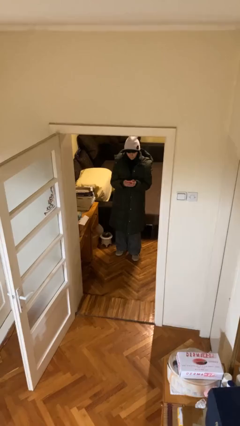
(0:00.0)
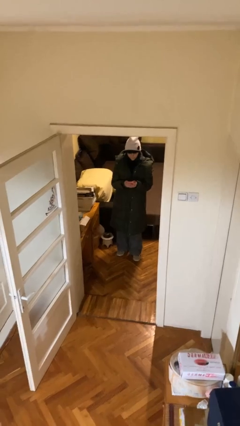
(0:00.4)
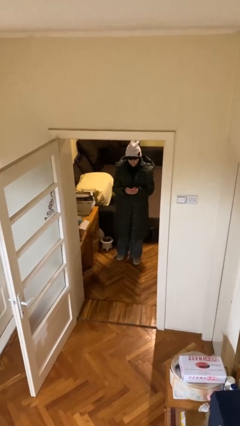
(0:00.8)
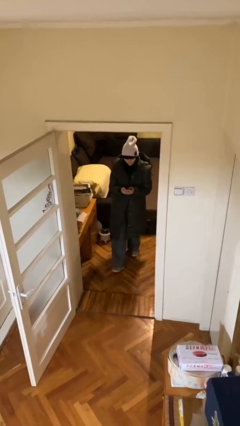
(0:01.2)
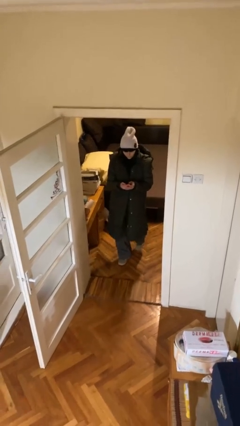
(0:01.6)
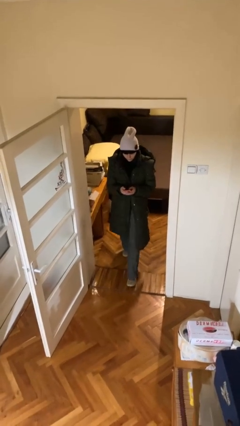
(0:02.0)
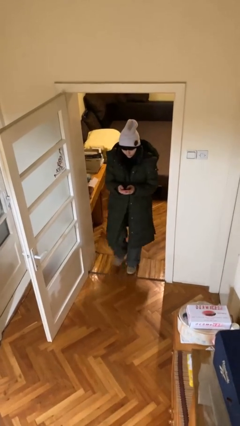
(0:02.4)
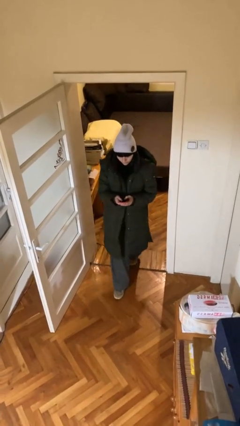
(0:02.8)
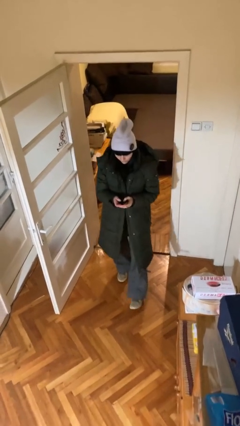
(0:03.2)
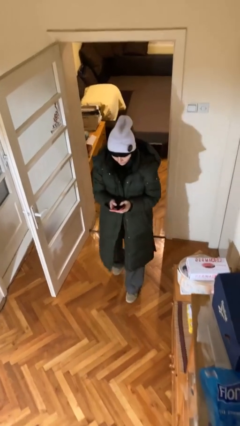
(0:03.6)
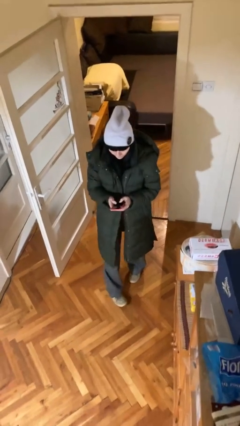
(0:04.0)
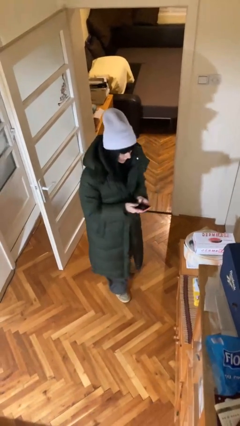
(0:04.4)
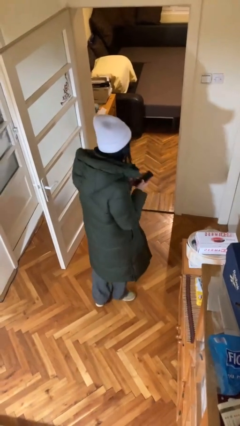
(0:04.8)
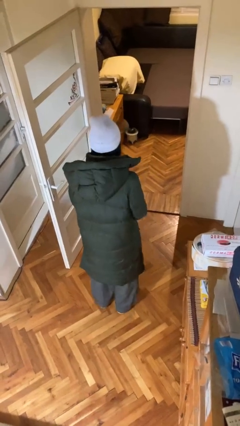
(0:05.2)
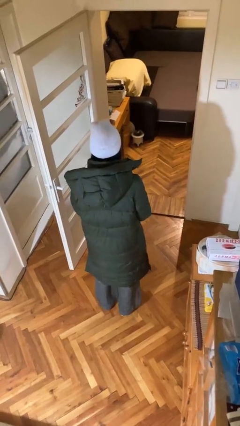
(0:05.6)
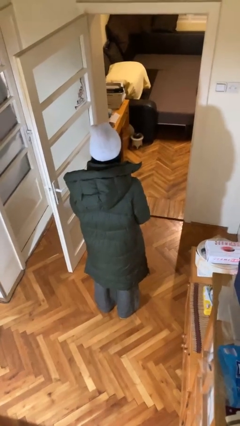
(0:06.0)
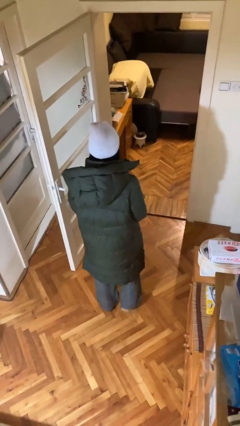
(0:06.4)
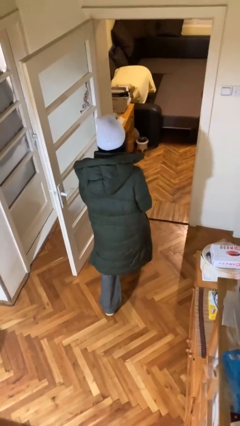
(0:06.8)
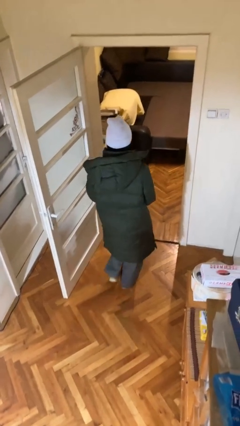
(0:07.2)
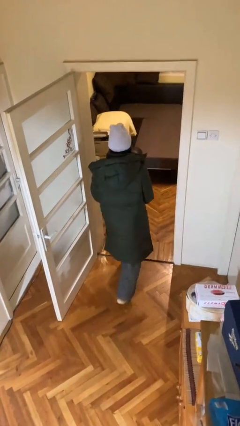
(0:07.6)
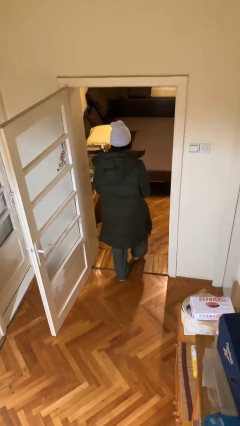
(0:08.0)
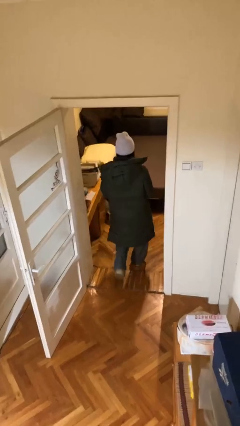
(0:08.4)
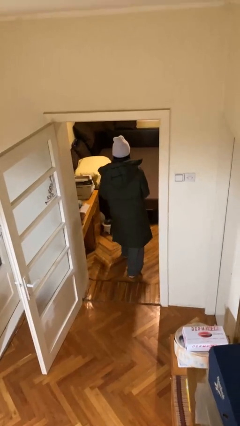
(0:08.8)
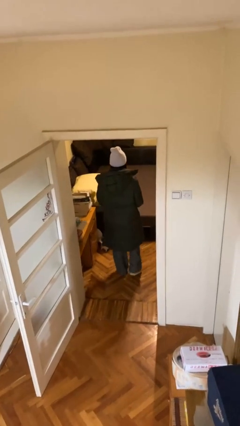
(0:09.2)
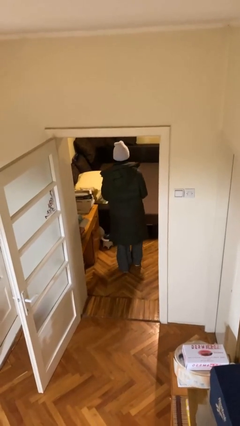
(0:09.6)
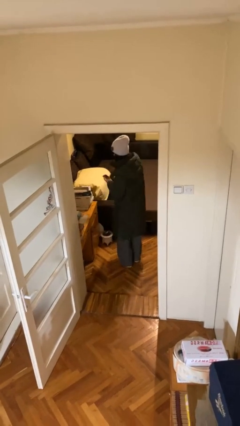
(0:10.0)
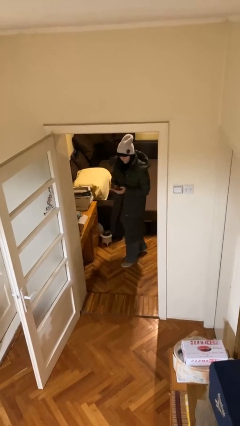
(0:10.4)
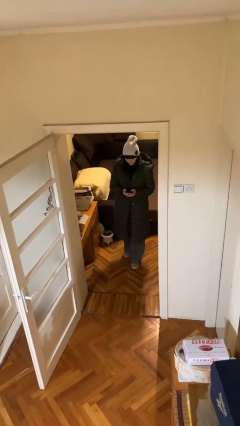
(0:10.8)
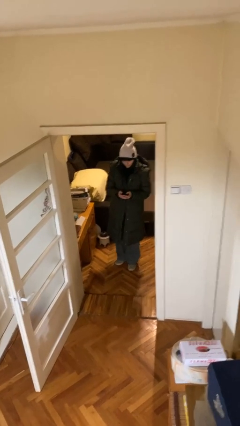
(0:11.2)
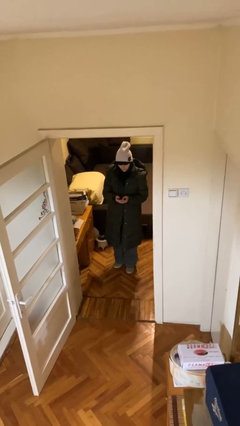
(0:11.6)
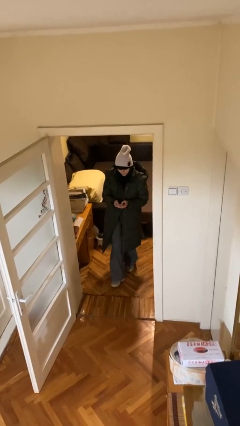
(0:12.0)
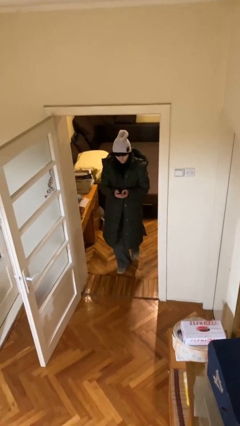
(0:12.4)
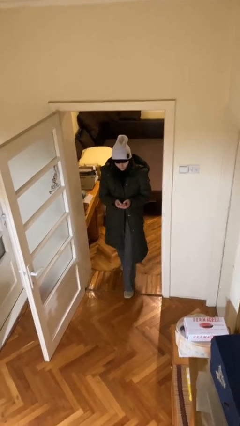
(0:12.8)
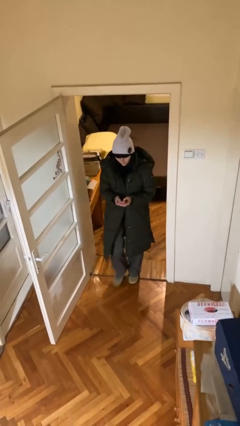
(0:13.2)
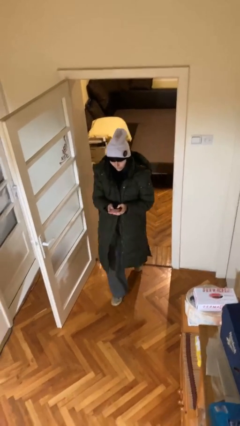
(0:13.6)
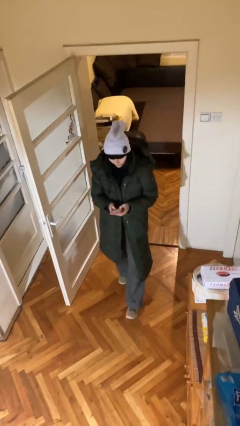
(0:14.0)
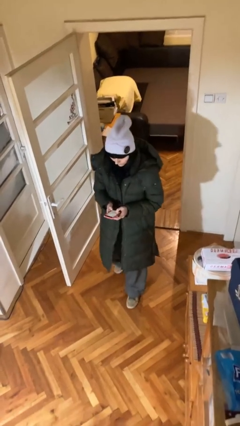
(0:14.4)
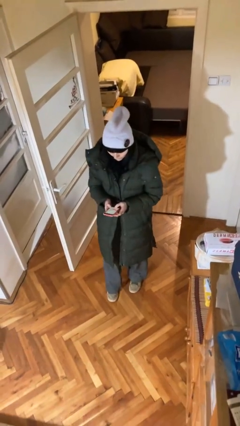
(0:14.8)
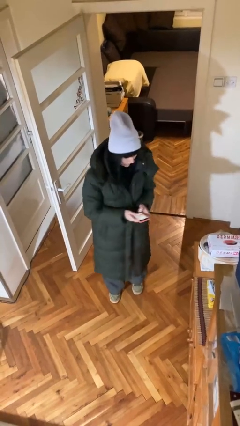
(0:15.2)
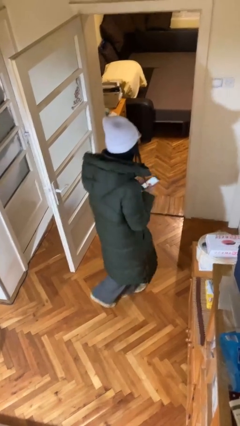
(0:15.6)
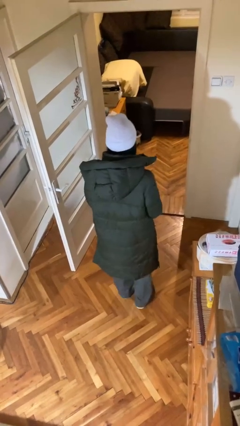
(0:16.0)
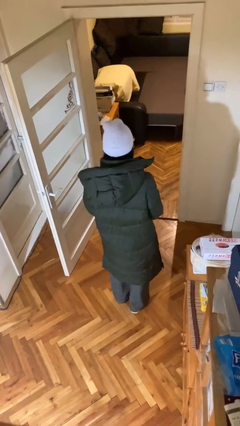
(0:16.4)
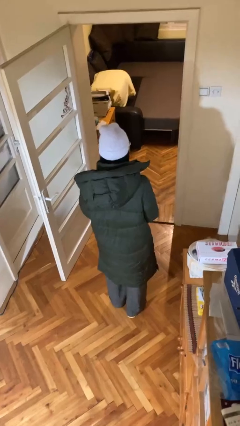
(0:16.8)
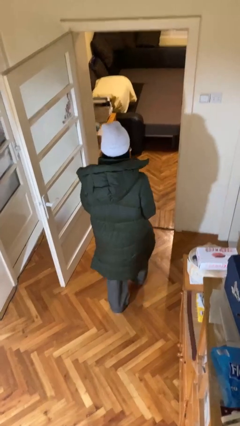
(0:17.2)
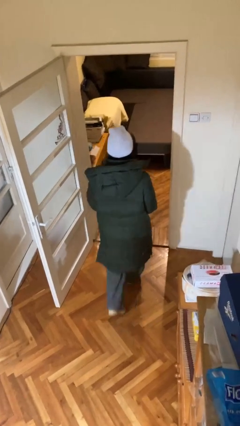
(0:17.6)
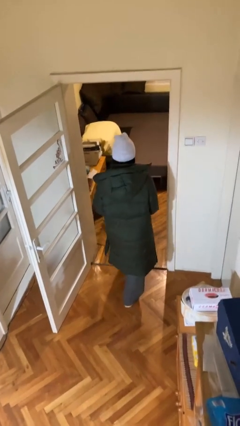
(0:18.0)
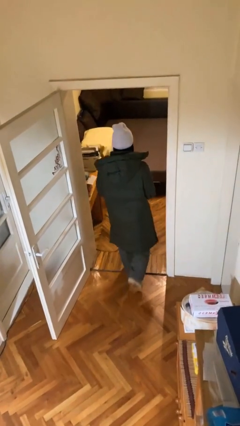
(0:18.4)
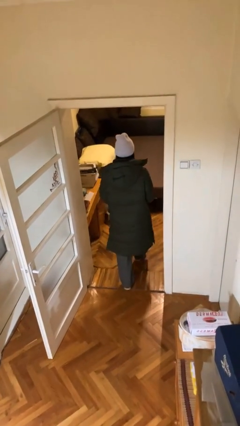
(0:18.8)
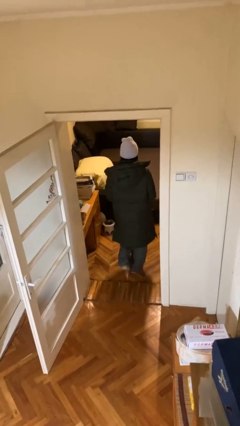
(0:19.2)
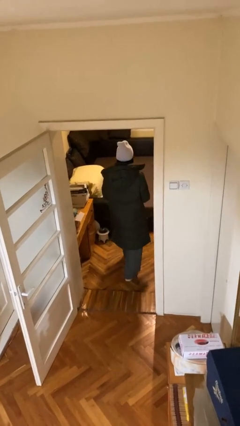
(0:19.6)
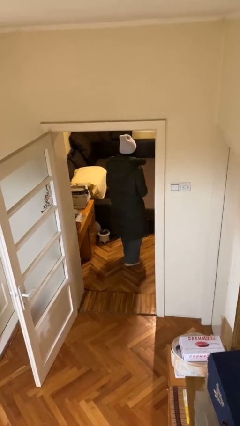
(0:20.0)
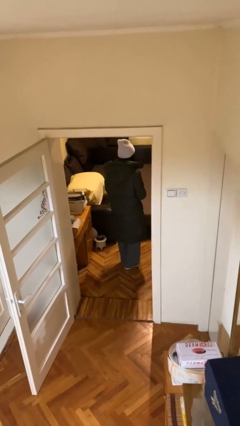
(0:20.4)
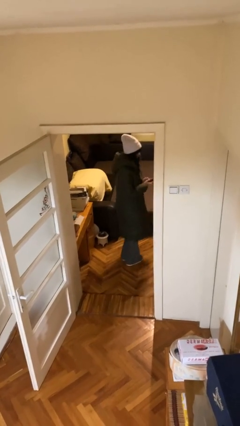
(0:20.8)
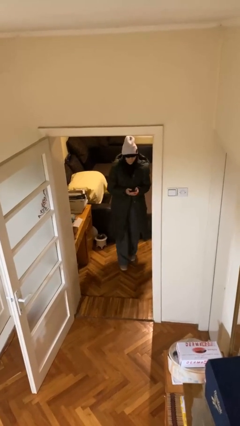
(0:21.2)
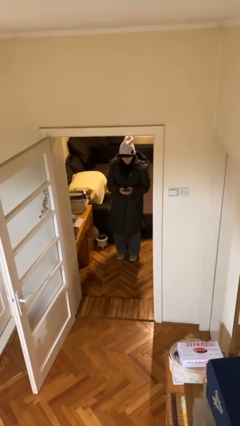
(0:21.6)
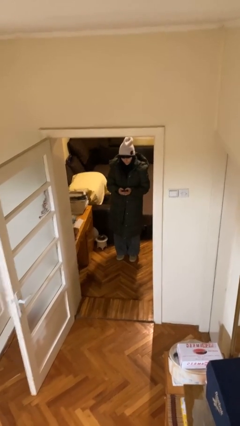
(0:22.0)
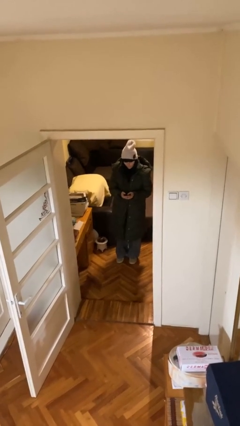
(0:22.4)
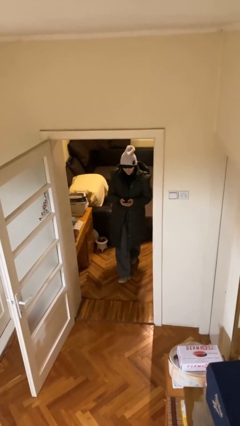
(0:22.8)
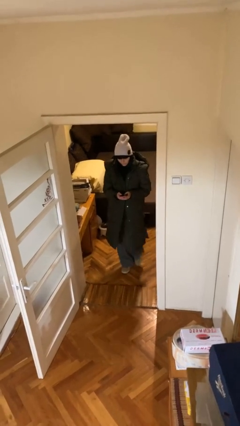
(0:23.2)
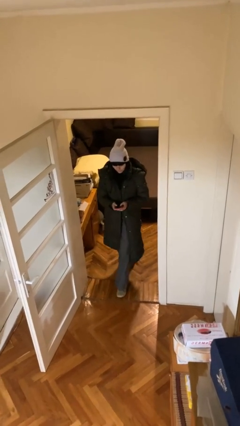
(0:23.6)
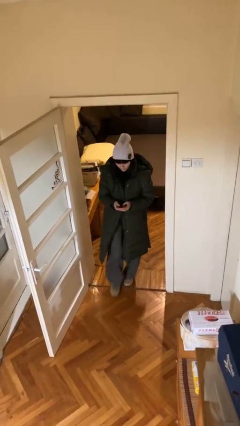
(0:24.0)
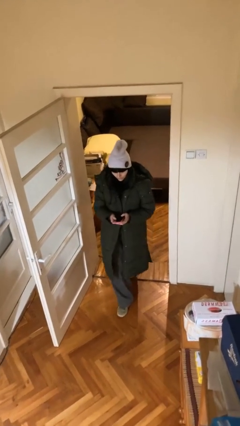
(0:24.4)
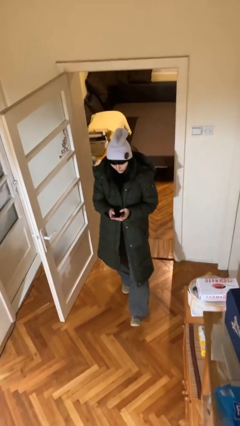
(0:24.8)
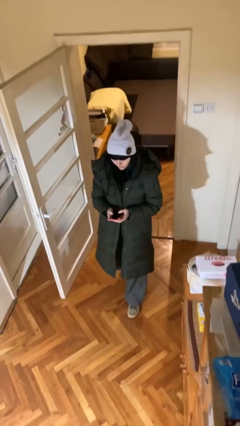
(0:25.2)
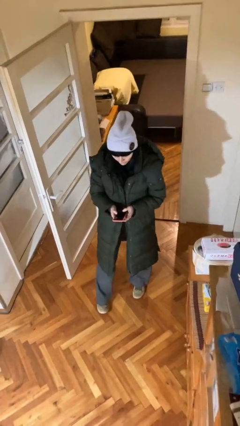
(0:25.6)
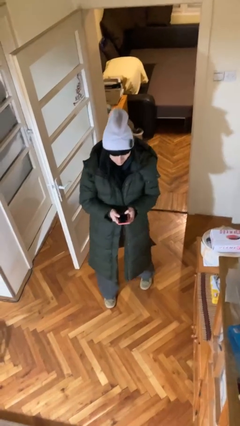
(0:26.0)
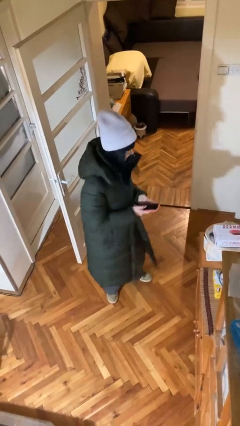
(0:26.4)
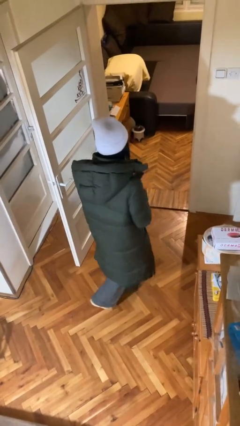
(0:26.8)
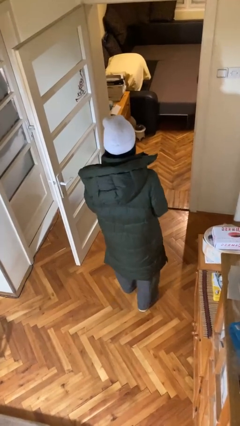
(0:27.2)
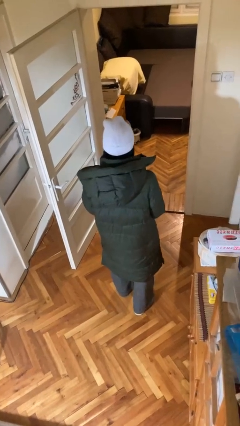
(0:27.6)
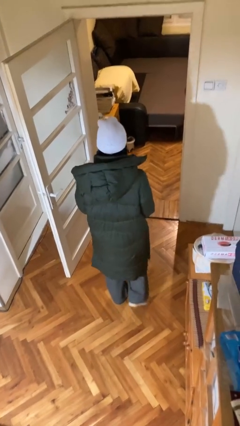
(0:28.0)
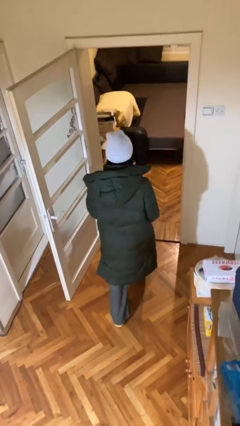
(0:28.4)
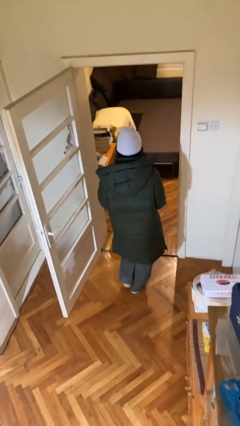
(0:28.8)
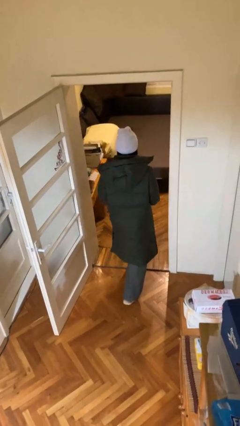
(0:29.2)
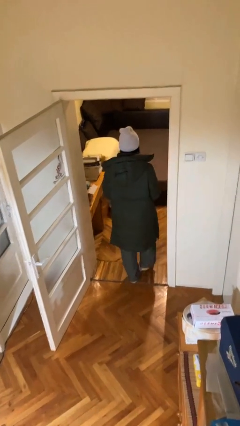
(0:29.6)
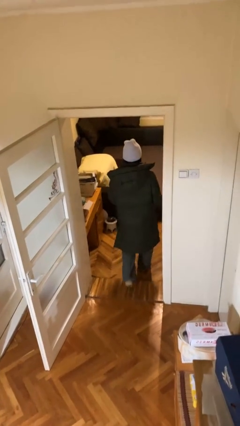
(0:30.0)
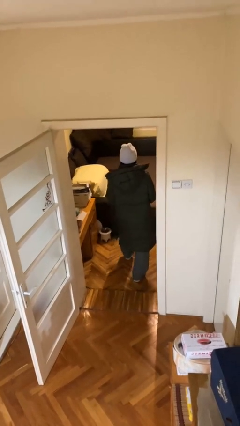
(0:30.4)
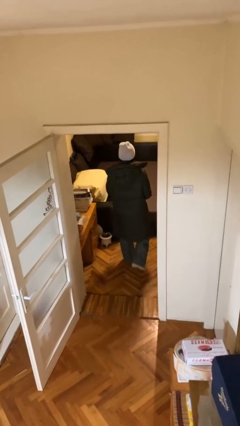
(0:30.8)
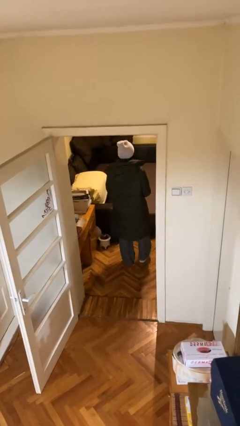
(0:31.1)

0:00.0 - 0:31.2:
person texts on phone

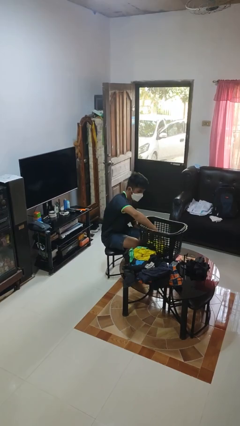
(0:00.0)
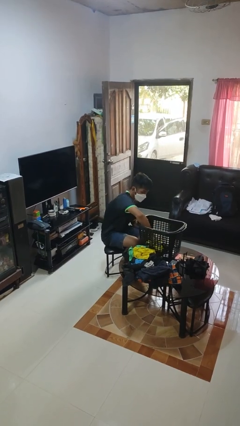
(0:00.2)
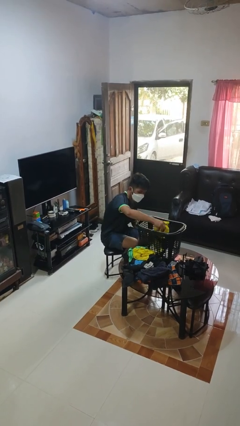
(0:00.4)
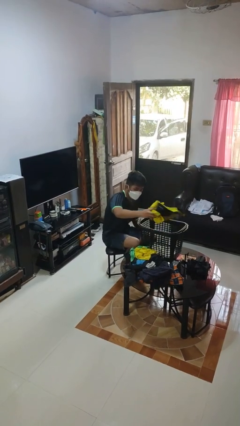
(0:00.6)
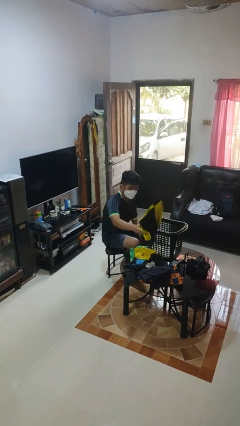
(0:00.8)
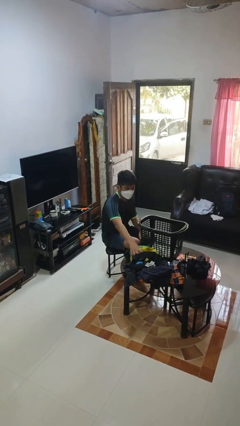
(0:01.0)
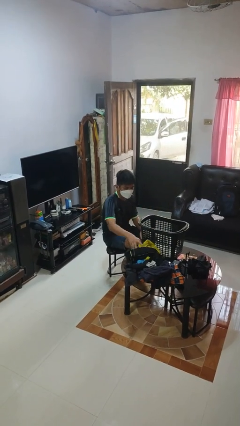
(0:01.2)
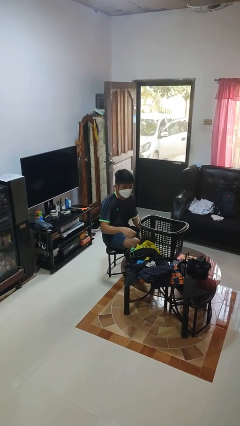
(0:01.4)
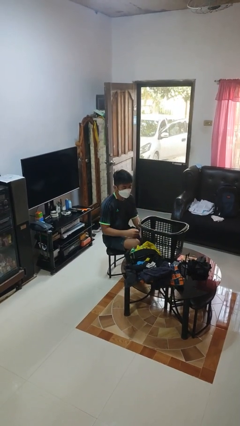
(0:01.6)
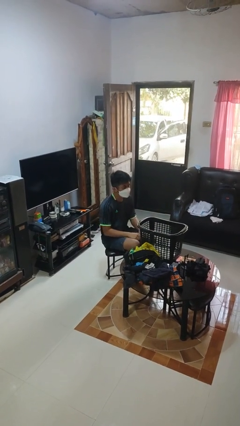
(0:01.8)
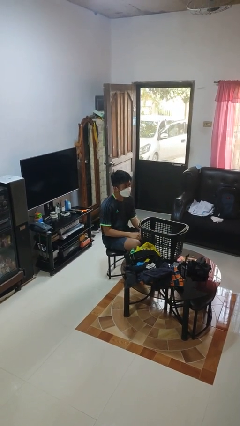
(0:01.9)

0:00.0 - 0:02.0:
person takes object from basket

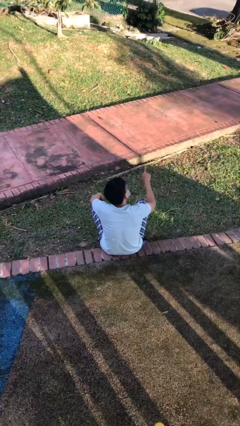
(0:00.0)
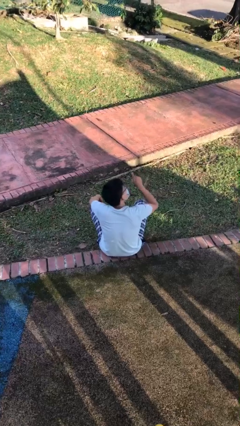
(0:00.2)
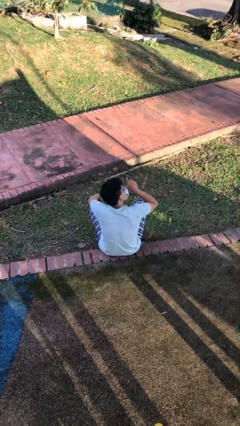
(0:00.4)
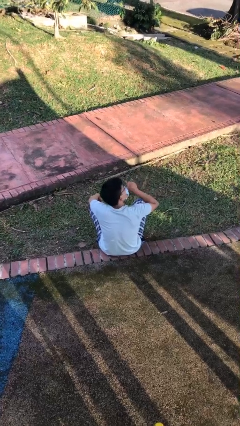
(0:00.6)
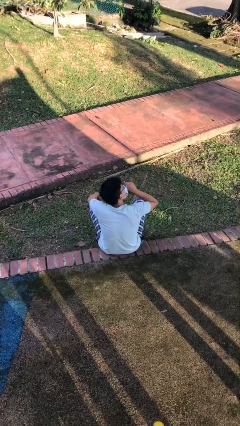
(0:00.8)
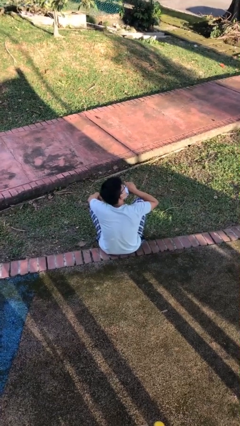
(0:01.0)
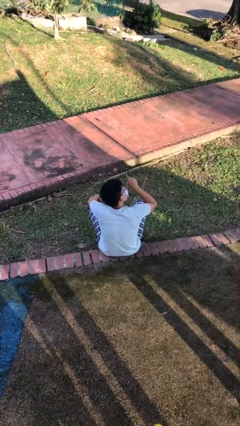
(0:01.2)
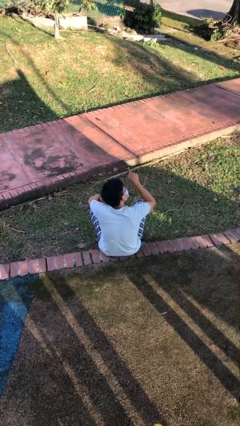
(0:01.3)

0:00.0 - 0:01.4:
person gestures be quiet
